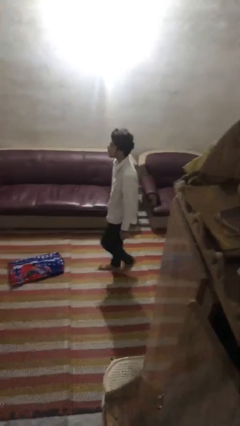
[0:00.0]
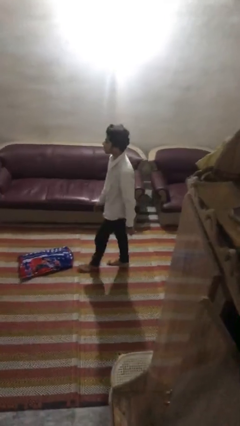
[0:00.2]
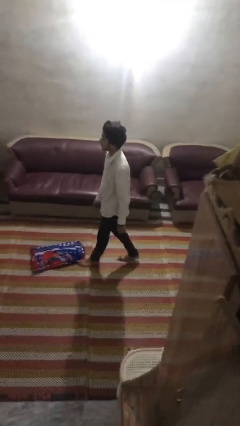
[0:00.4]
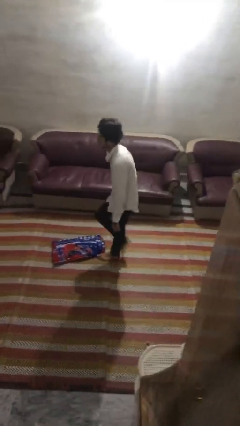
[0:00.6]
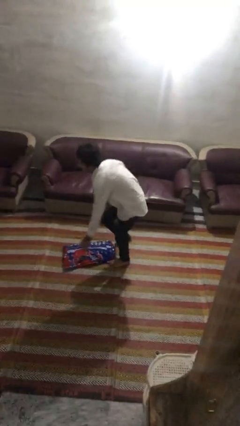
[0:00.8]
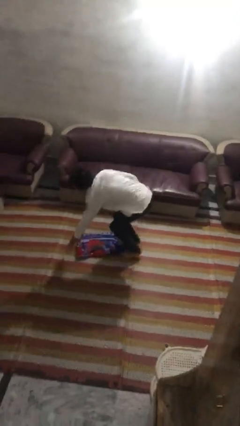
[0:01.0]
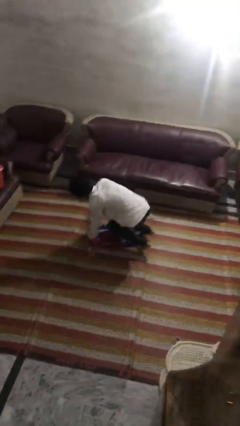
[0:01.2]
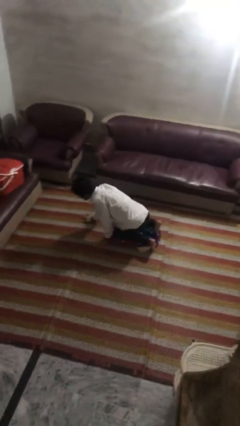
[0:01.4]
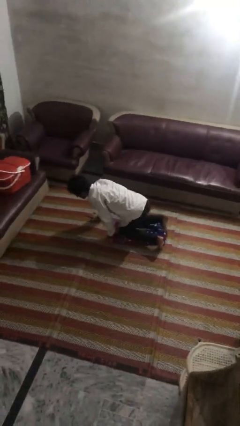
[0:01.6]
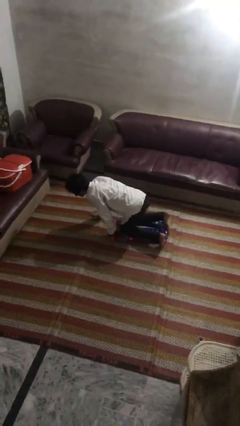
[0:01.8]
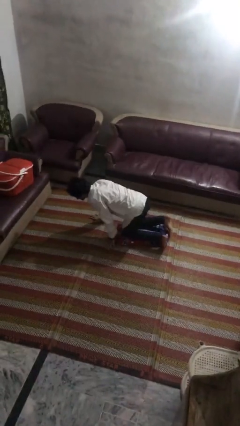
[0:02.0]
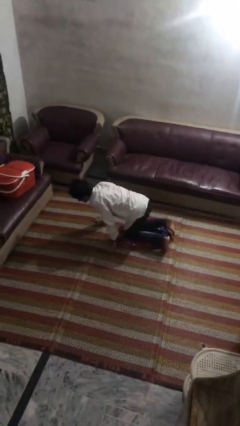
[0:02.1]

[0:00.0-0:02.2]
person trips on object on floor

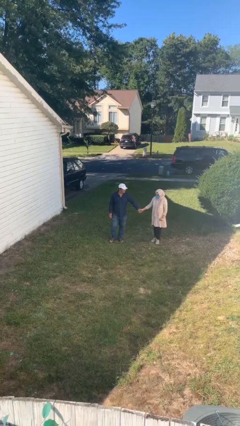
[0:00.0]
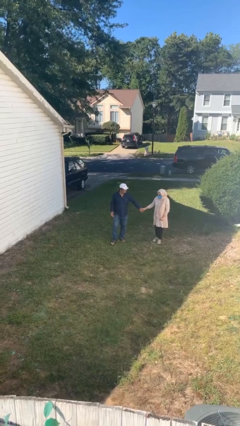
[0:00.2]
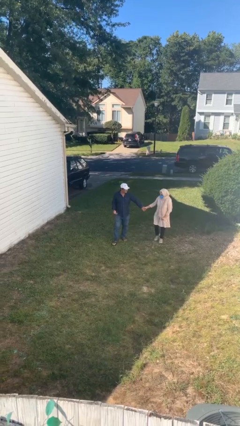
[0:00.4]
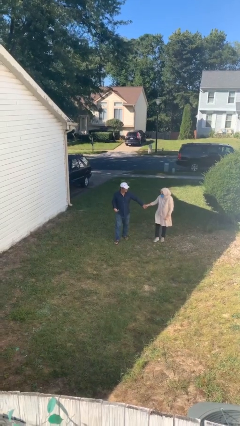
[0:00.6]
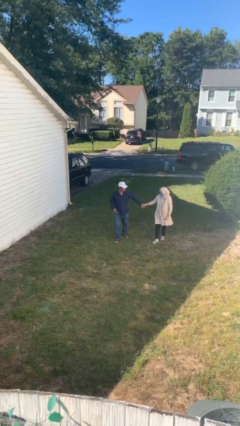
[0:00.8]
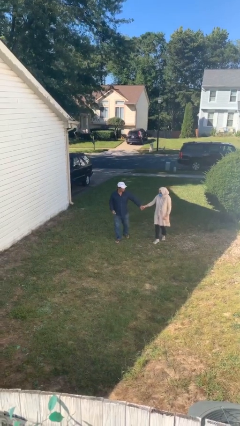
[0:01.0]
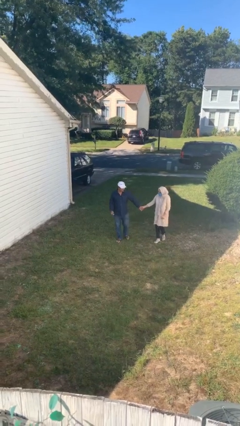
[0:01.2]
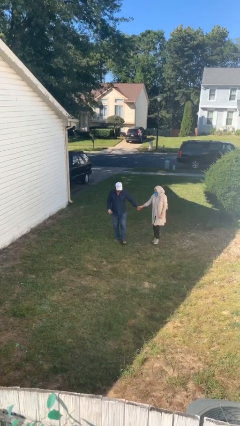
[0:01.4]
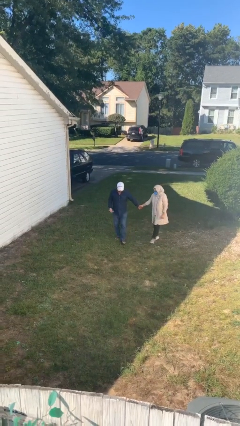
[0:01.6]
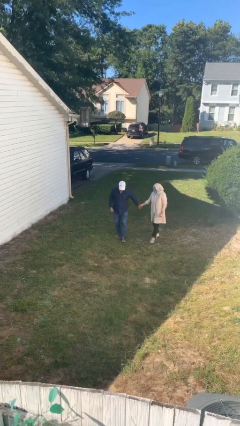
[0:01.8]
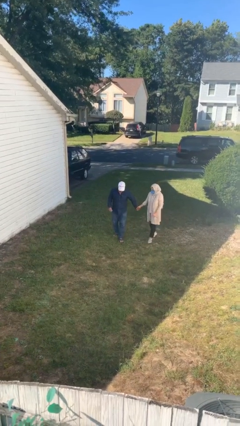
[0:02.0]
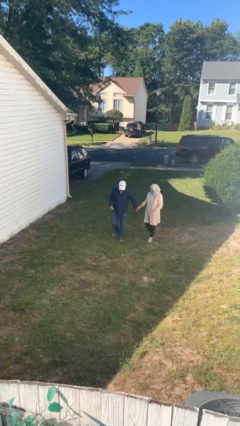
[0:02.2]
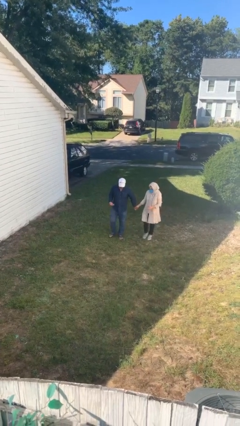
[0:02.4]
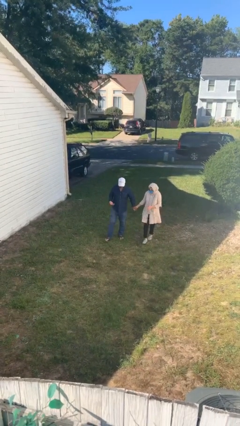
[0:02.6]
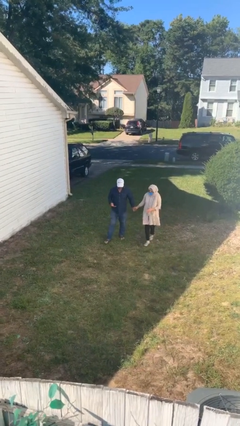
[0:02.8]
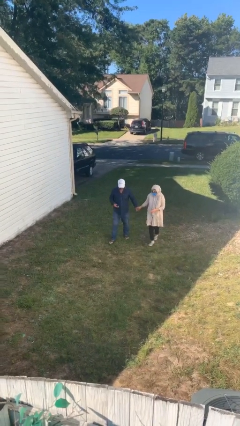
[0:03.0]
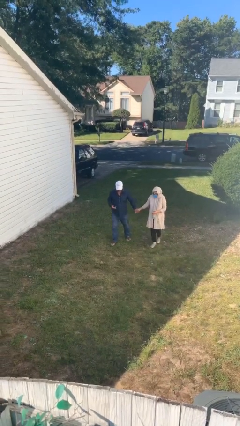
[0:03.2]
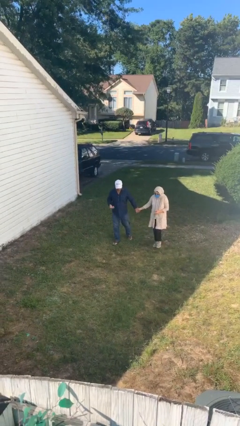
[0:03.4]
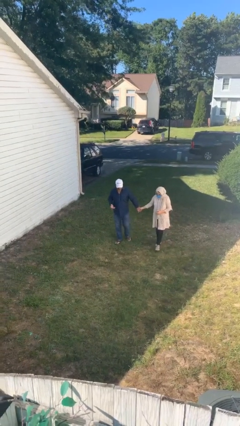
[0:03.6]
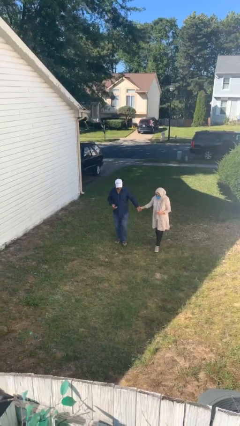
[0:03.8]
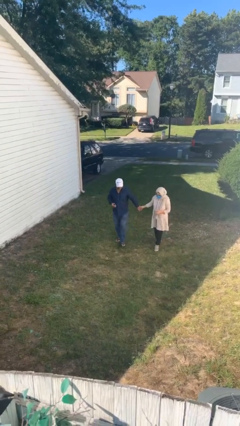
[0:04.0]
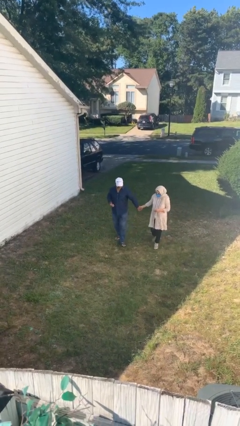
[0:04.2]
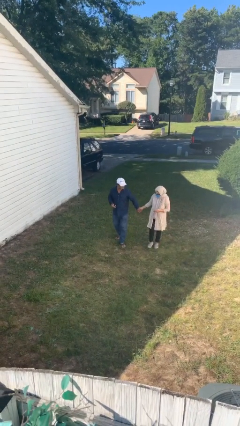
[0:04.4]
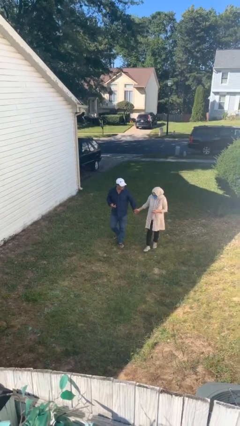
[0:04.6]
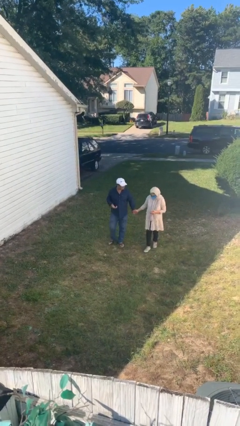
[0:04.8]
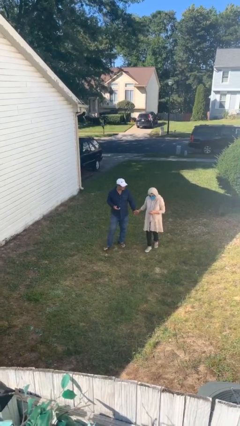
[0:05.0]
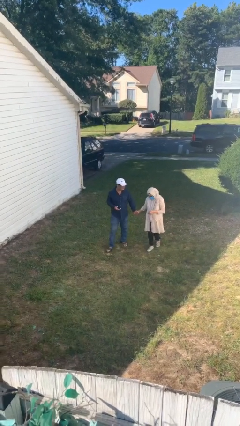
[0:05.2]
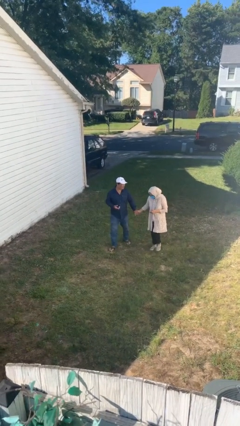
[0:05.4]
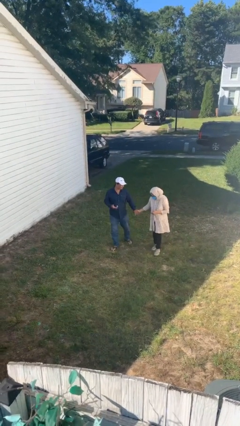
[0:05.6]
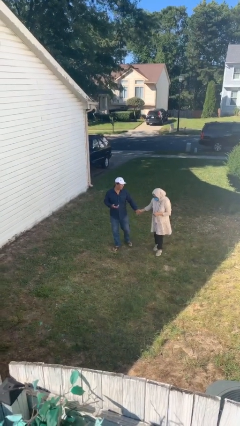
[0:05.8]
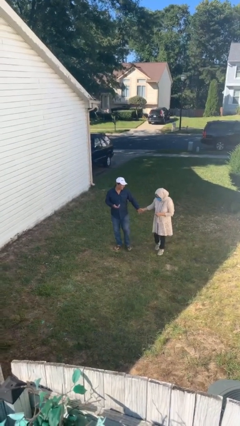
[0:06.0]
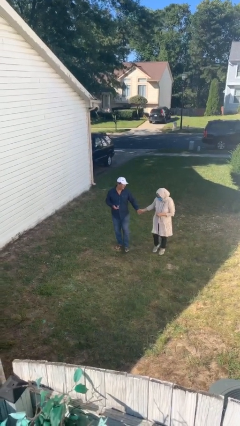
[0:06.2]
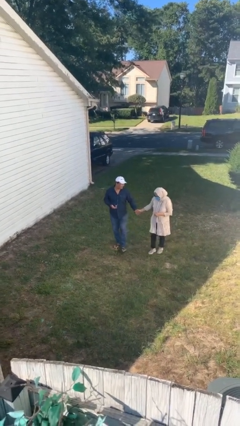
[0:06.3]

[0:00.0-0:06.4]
person holds hand

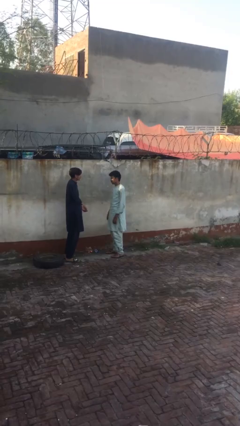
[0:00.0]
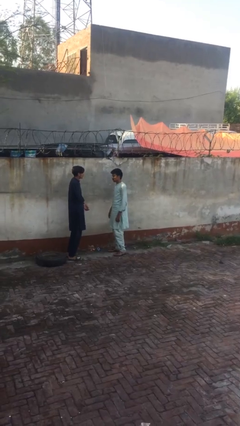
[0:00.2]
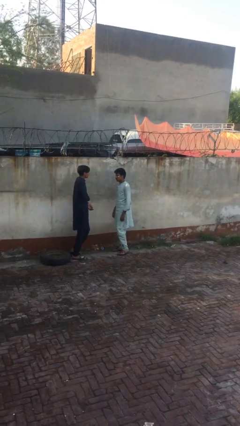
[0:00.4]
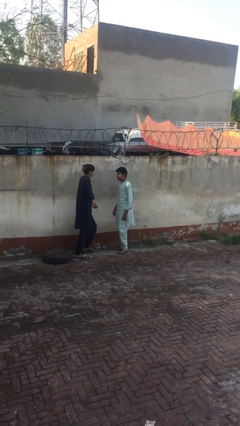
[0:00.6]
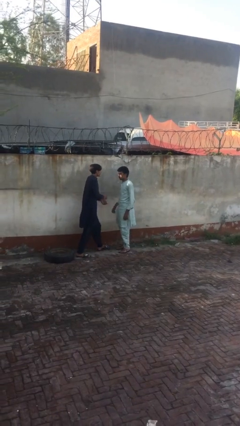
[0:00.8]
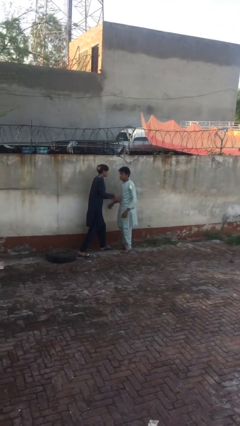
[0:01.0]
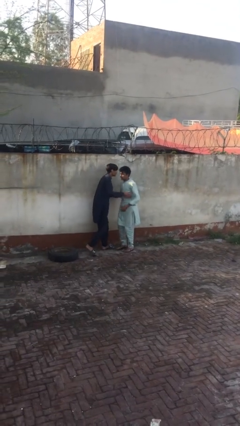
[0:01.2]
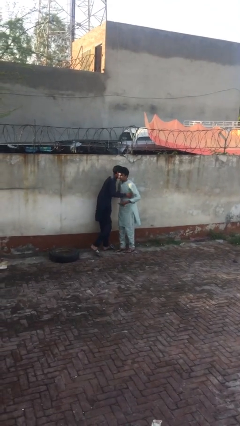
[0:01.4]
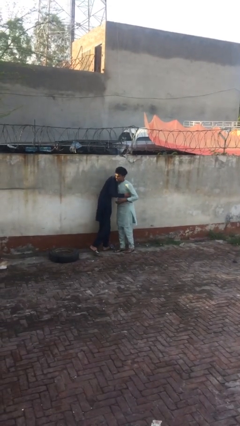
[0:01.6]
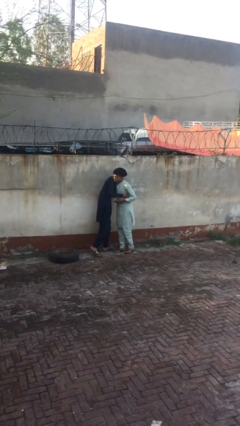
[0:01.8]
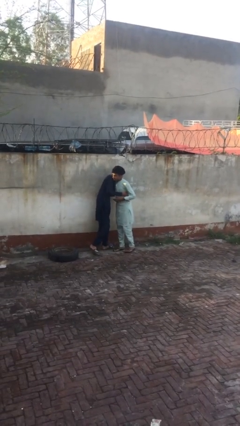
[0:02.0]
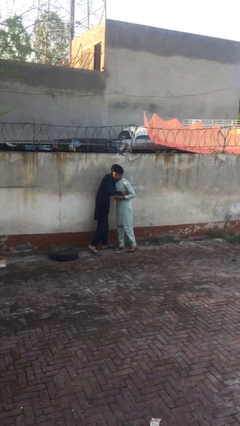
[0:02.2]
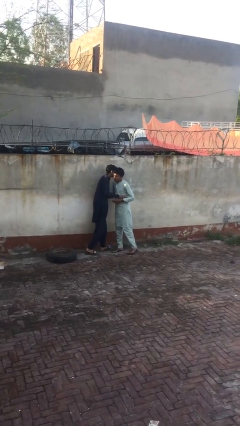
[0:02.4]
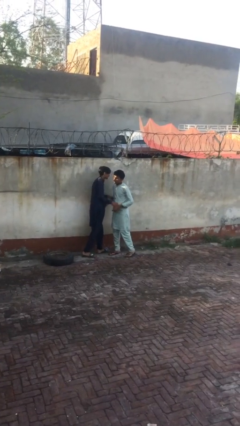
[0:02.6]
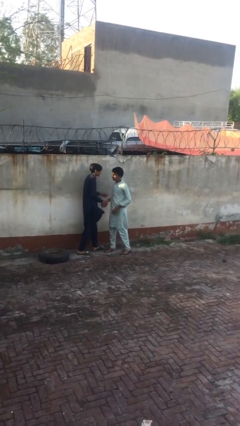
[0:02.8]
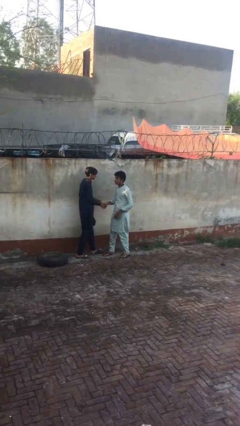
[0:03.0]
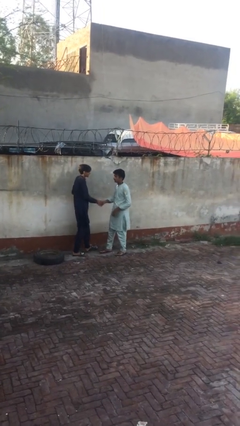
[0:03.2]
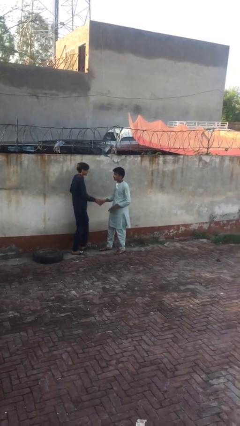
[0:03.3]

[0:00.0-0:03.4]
person embraces person

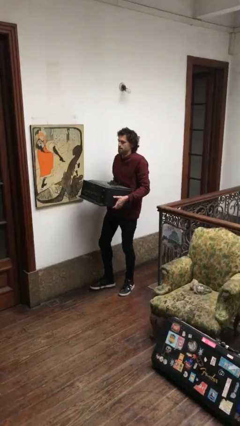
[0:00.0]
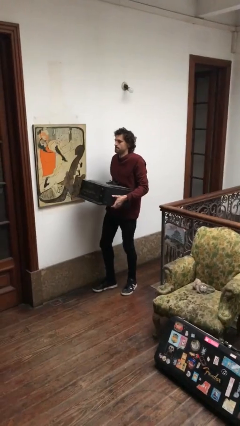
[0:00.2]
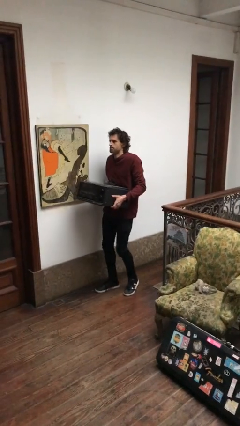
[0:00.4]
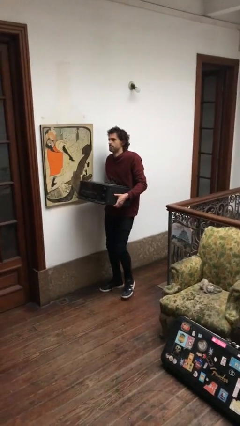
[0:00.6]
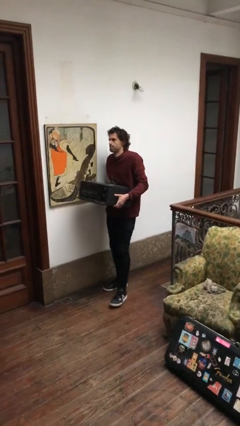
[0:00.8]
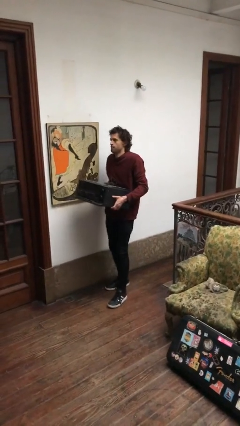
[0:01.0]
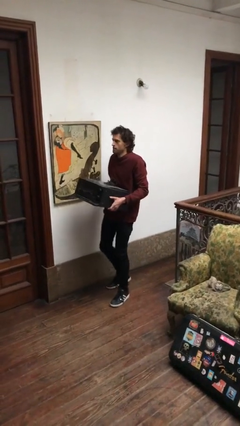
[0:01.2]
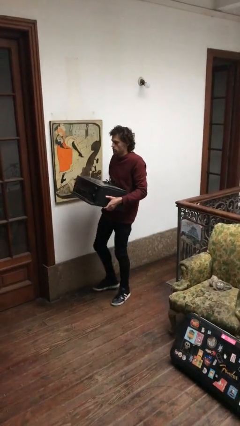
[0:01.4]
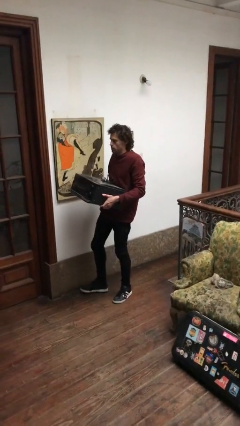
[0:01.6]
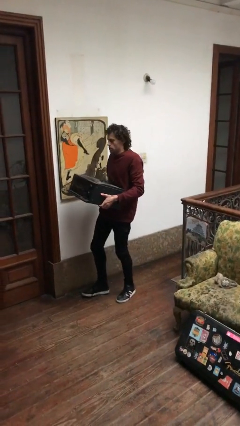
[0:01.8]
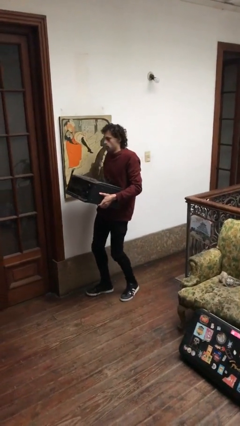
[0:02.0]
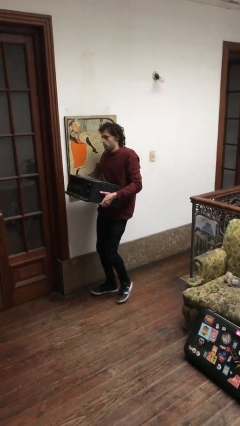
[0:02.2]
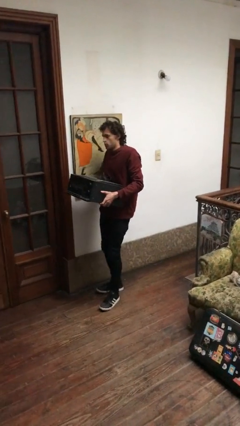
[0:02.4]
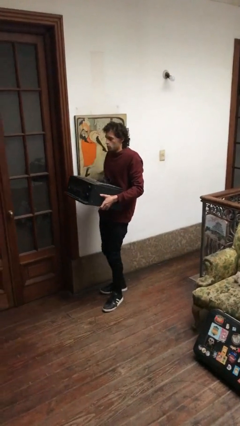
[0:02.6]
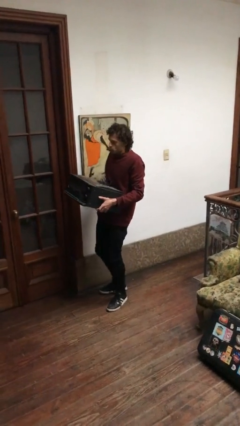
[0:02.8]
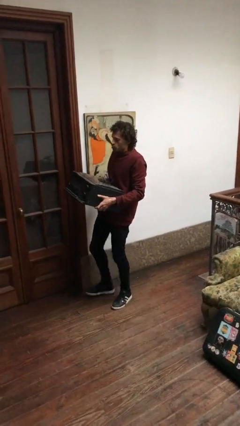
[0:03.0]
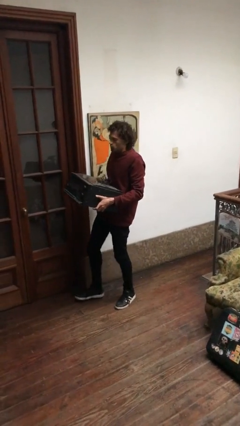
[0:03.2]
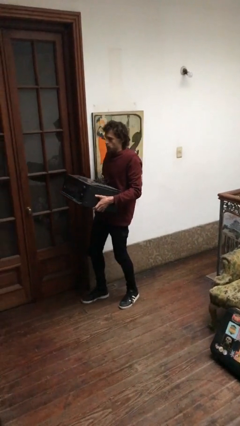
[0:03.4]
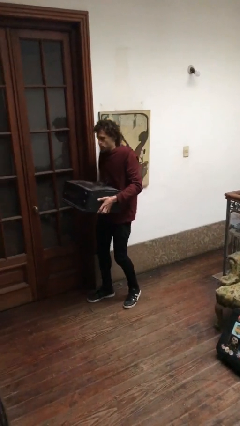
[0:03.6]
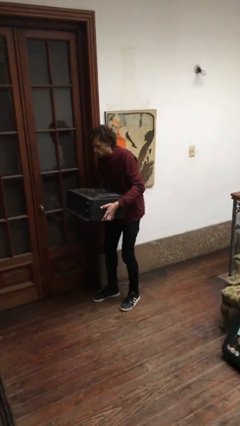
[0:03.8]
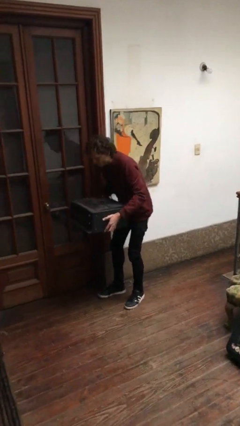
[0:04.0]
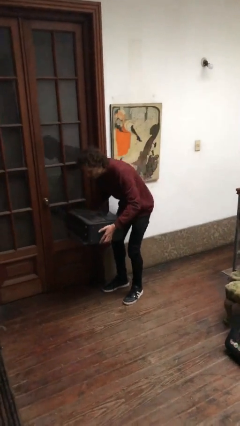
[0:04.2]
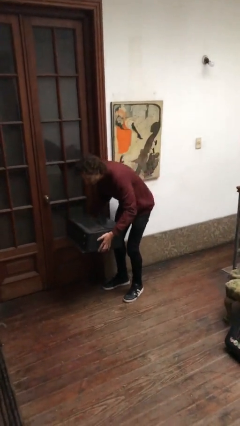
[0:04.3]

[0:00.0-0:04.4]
person carries heavy object

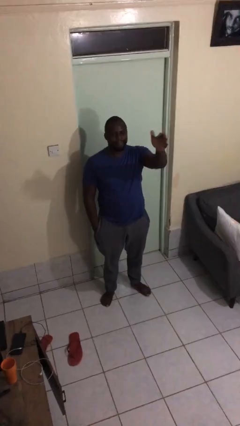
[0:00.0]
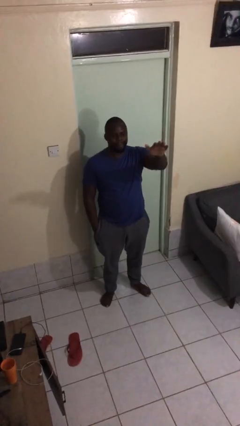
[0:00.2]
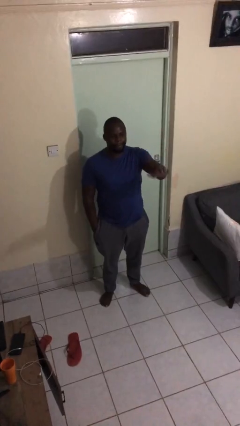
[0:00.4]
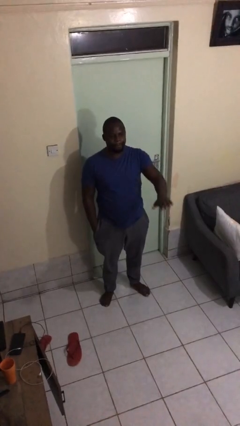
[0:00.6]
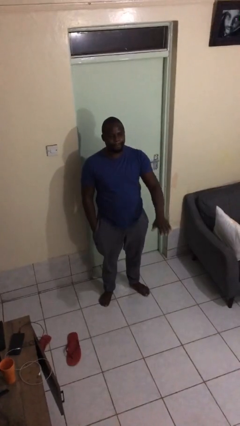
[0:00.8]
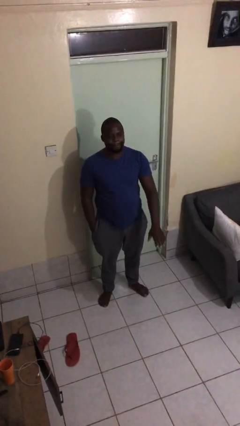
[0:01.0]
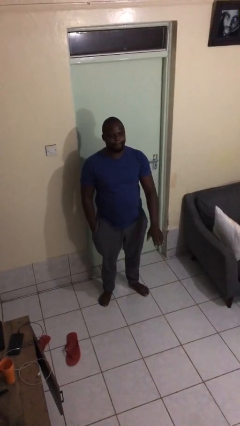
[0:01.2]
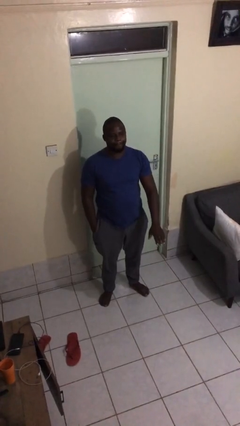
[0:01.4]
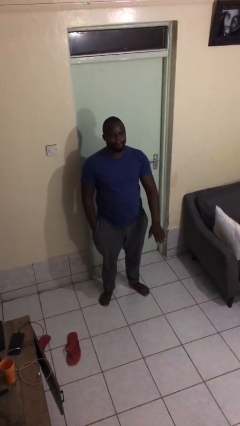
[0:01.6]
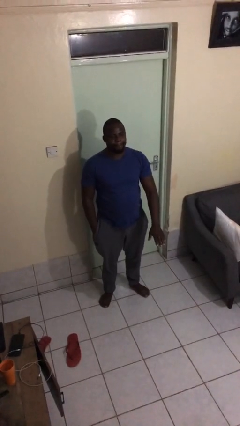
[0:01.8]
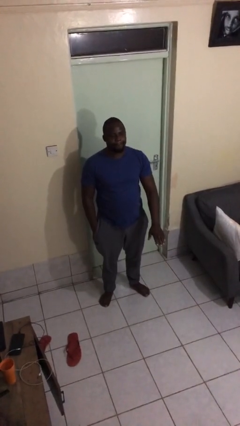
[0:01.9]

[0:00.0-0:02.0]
person gestures swipe down
